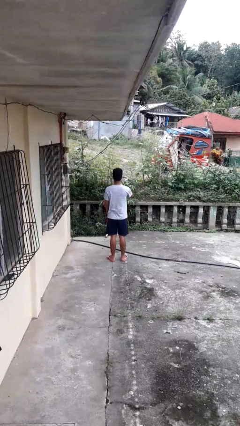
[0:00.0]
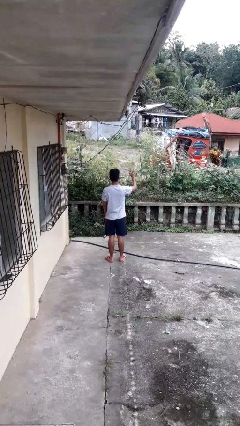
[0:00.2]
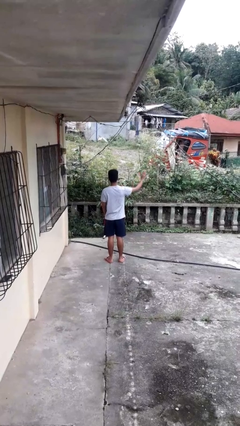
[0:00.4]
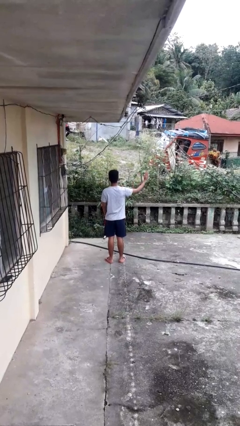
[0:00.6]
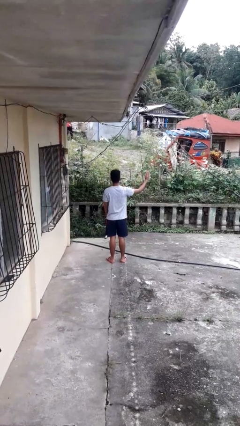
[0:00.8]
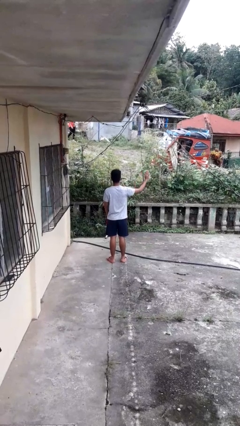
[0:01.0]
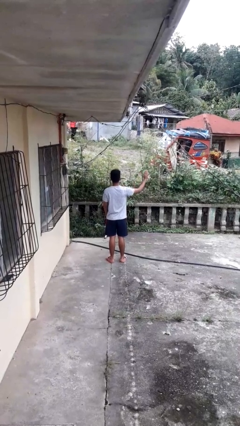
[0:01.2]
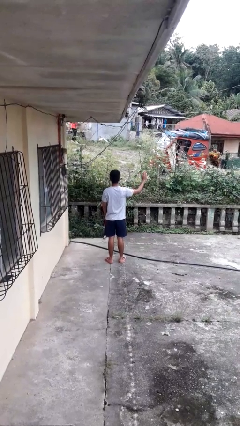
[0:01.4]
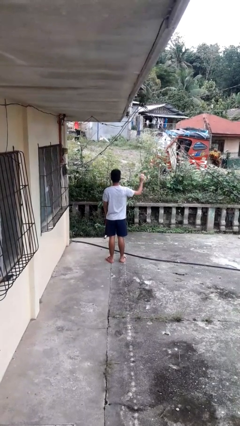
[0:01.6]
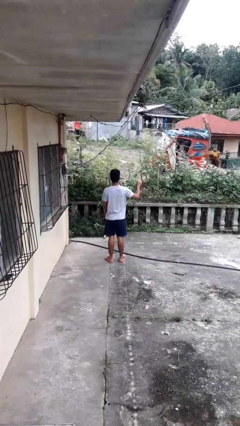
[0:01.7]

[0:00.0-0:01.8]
person gestures swipe right

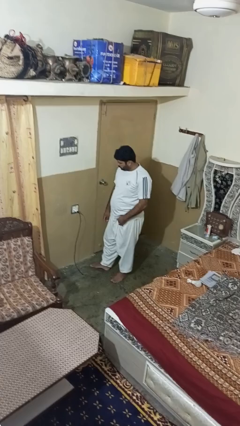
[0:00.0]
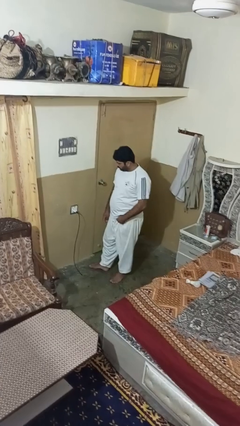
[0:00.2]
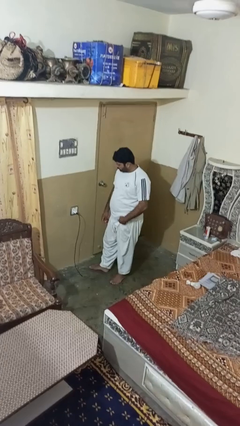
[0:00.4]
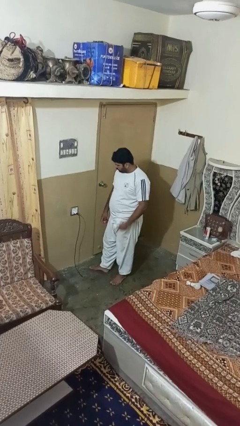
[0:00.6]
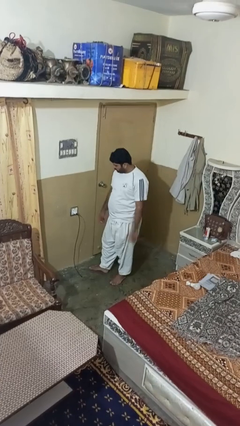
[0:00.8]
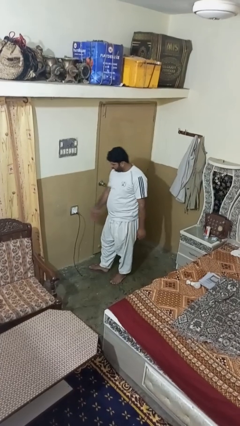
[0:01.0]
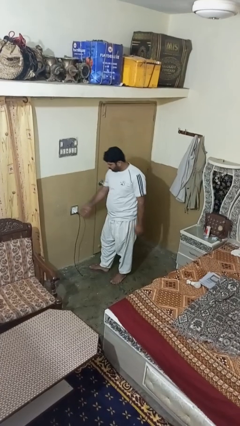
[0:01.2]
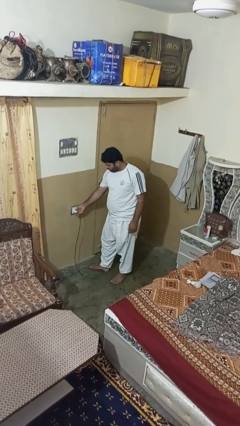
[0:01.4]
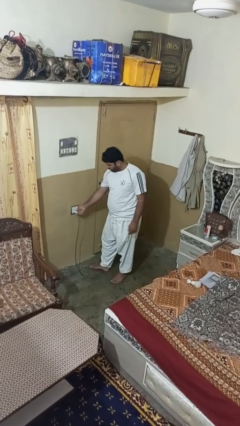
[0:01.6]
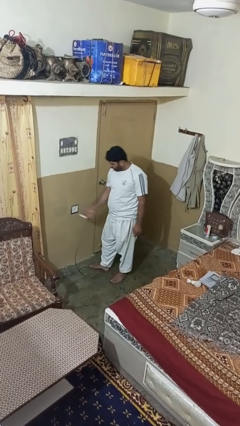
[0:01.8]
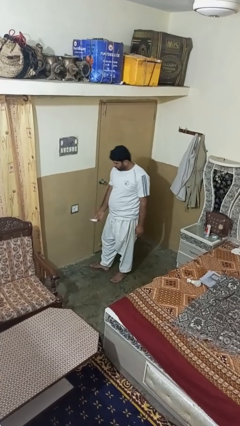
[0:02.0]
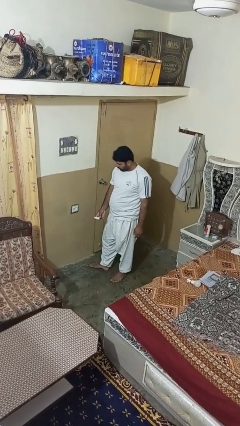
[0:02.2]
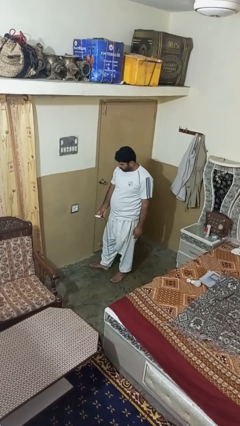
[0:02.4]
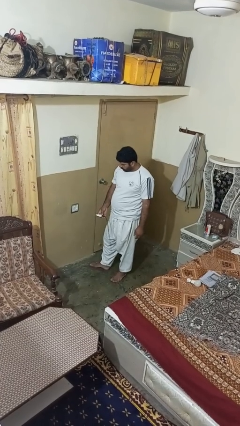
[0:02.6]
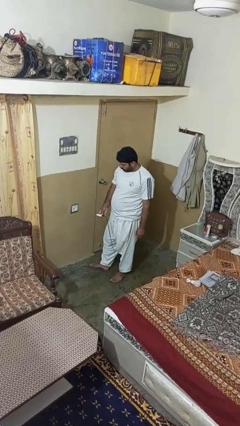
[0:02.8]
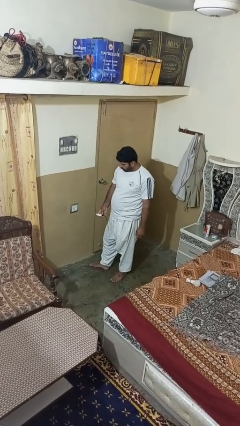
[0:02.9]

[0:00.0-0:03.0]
person unplugs from electrical socket

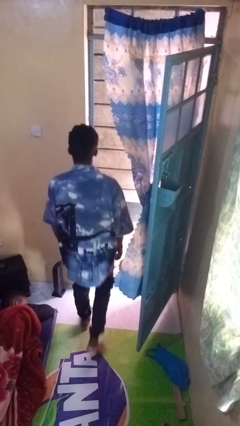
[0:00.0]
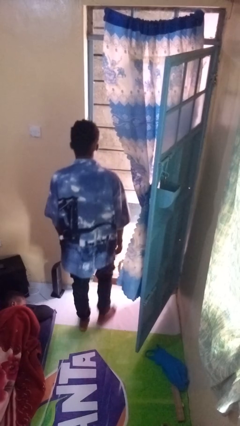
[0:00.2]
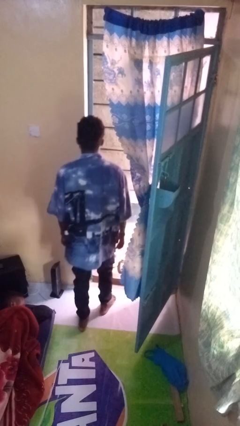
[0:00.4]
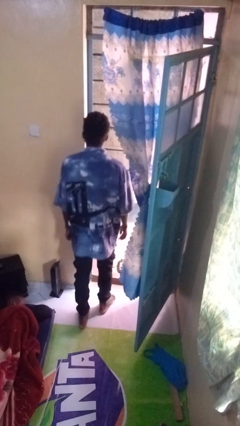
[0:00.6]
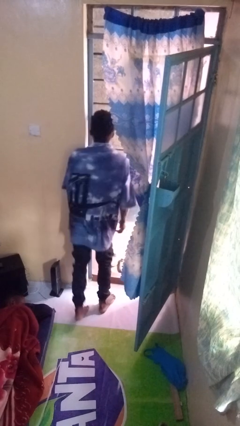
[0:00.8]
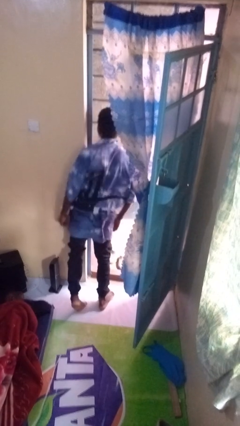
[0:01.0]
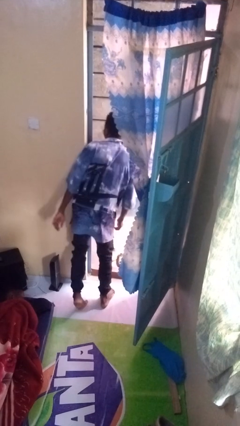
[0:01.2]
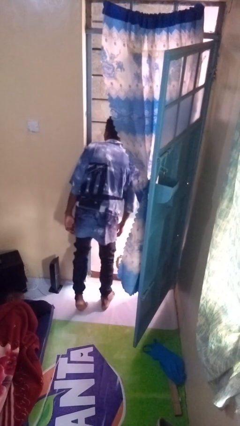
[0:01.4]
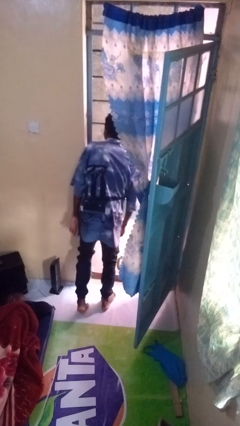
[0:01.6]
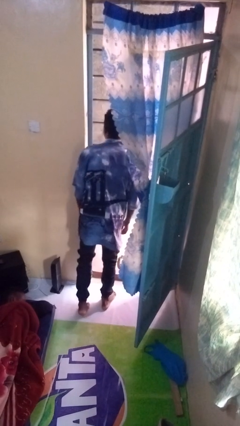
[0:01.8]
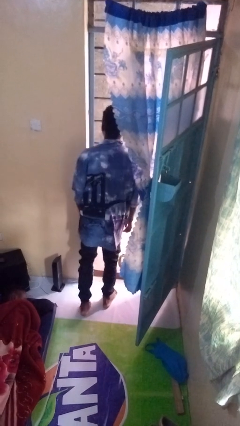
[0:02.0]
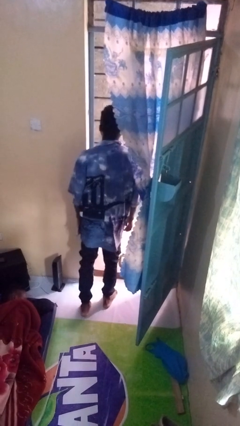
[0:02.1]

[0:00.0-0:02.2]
person bumps into wall

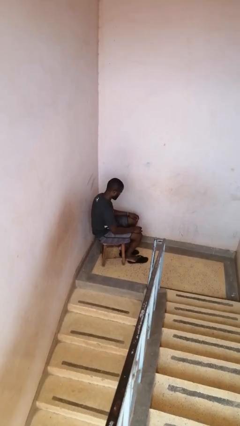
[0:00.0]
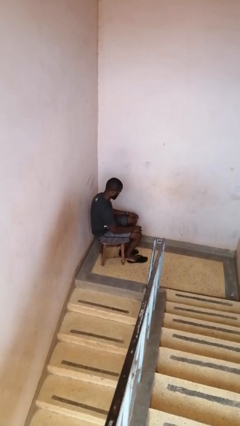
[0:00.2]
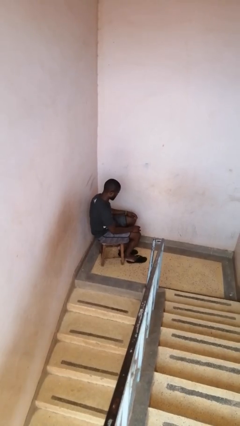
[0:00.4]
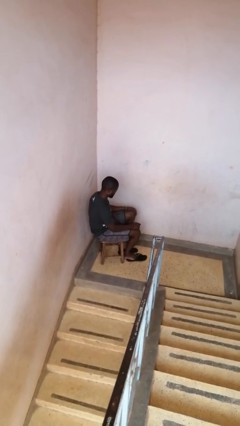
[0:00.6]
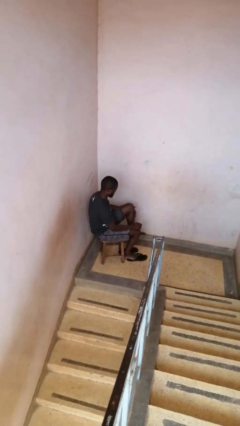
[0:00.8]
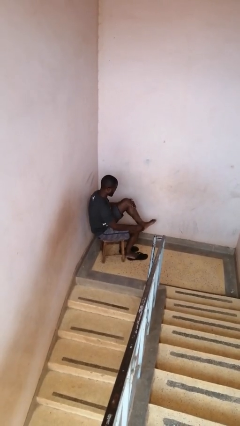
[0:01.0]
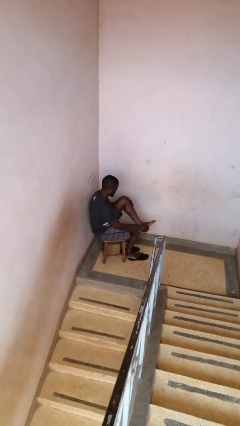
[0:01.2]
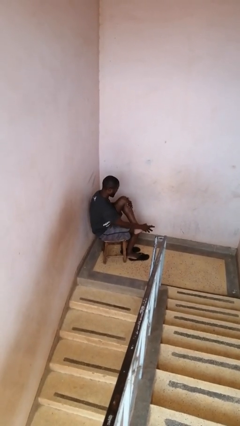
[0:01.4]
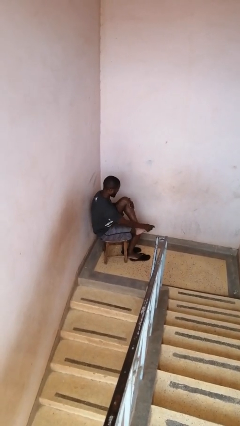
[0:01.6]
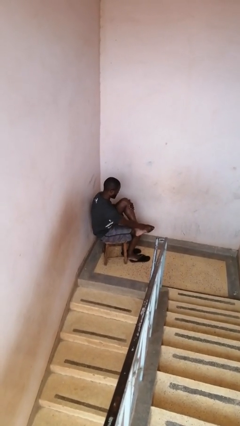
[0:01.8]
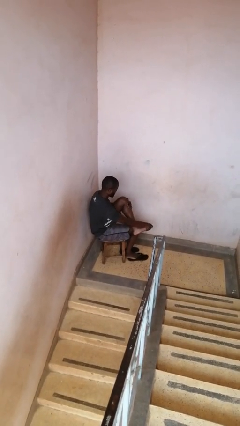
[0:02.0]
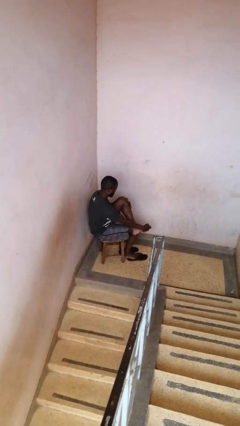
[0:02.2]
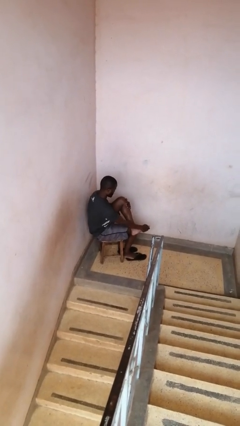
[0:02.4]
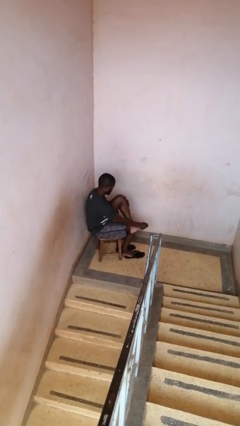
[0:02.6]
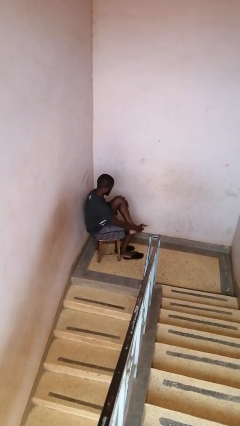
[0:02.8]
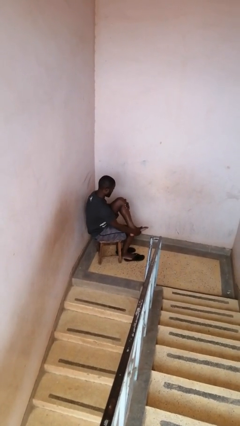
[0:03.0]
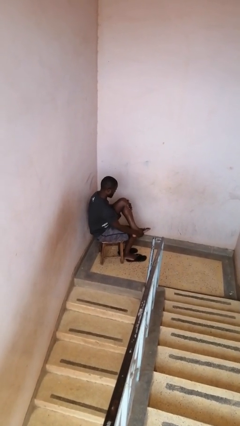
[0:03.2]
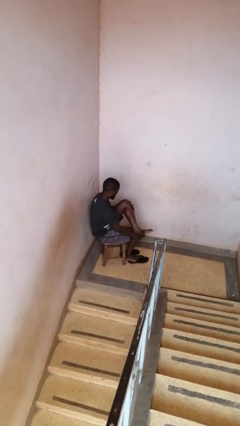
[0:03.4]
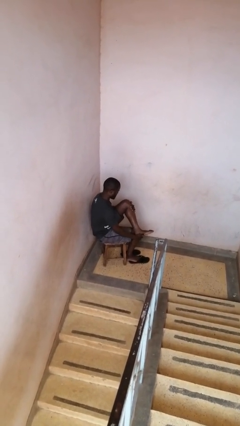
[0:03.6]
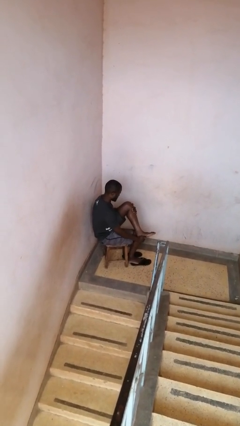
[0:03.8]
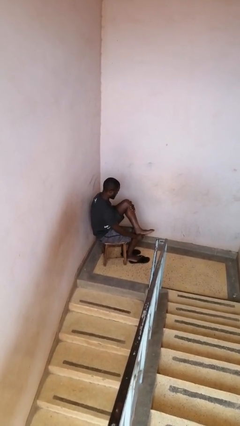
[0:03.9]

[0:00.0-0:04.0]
person rubs foot

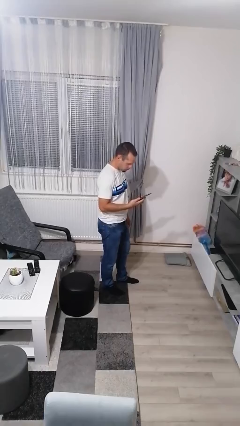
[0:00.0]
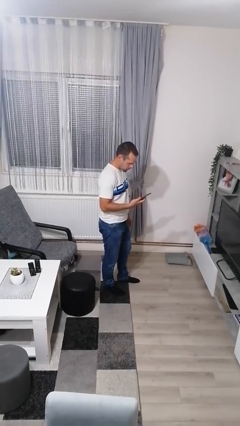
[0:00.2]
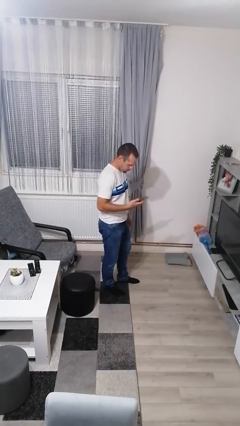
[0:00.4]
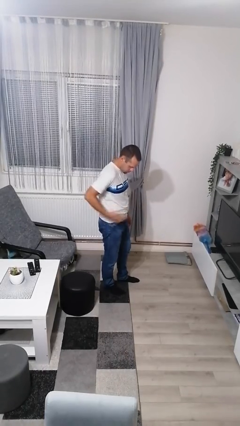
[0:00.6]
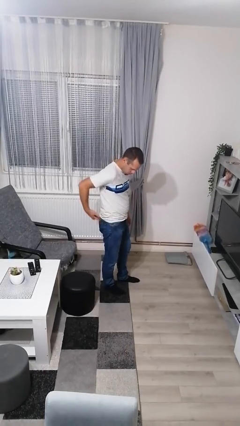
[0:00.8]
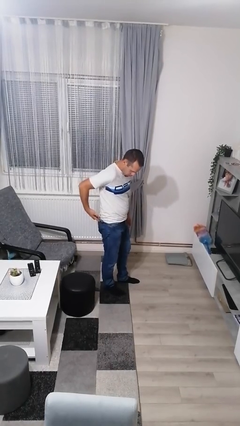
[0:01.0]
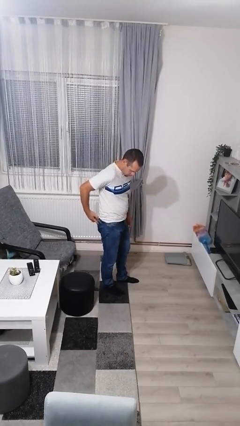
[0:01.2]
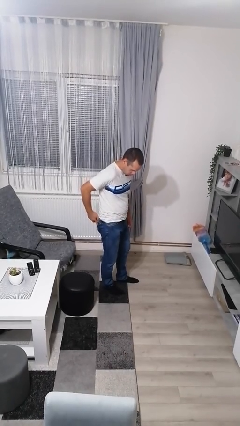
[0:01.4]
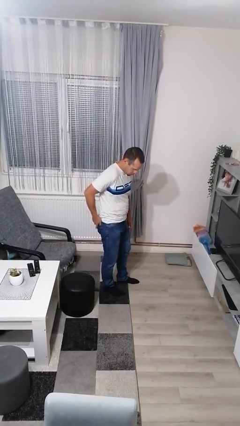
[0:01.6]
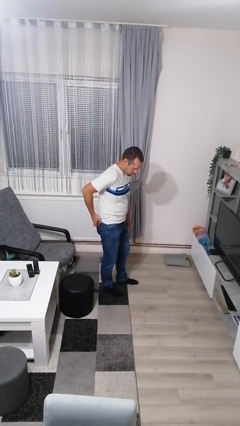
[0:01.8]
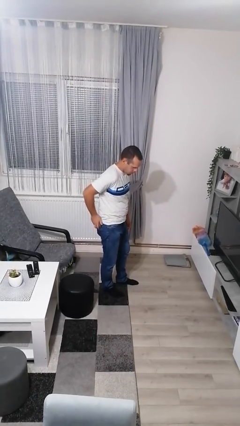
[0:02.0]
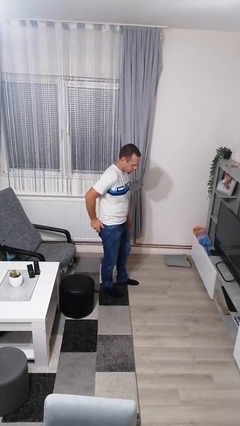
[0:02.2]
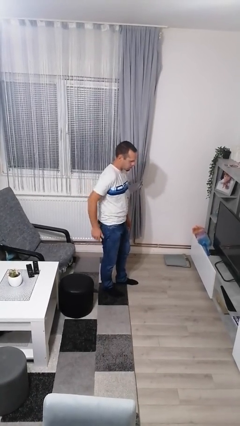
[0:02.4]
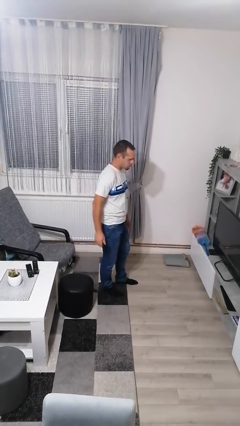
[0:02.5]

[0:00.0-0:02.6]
person puts phone into pocket

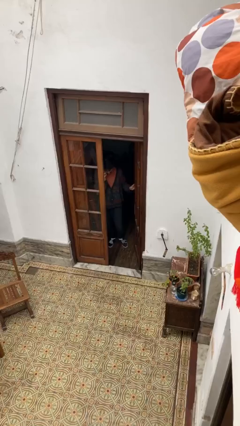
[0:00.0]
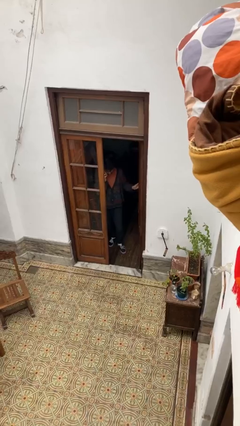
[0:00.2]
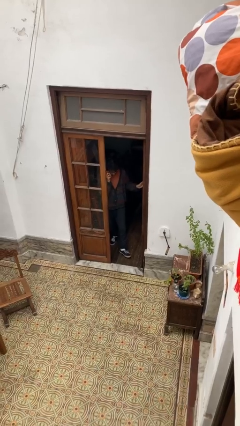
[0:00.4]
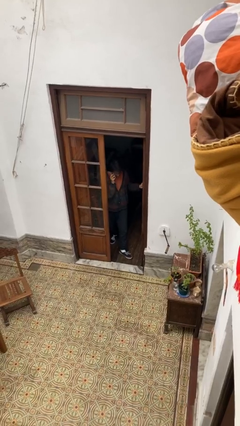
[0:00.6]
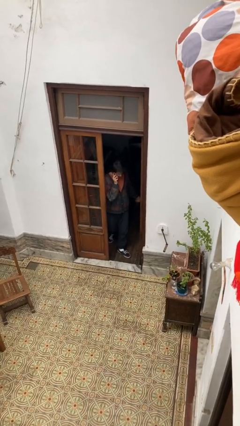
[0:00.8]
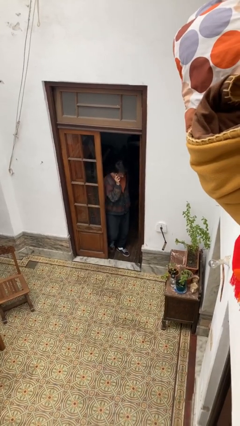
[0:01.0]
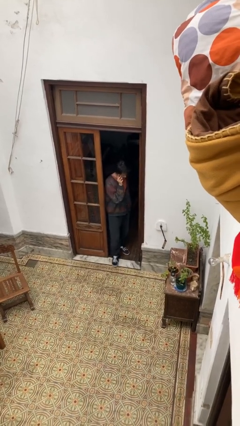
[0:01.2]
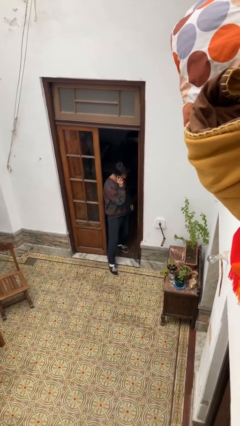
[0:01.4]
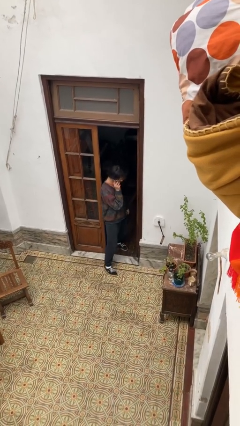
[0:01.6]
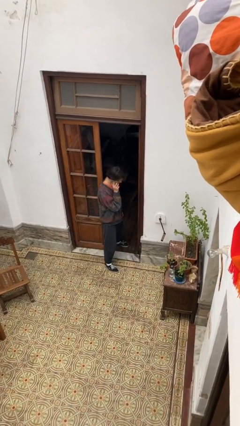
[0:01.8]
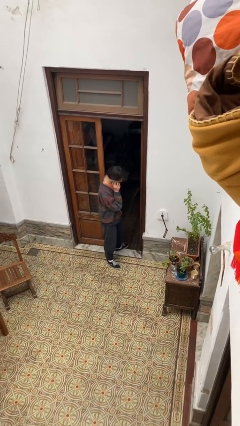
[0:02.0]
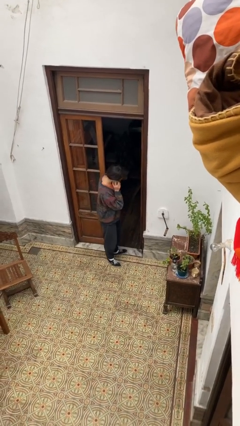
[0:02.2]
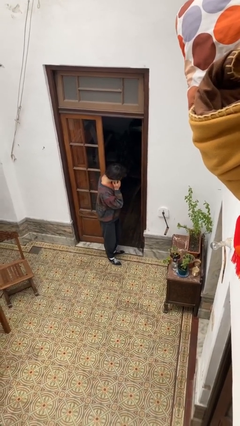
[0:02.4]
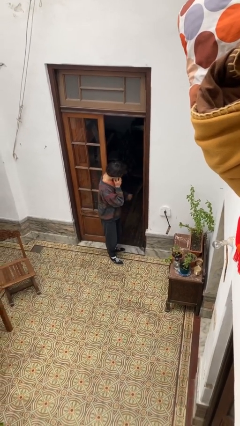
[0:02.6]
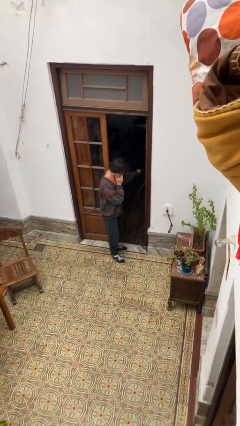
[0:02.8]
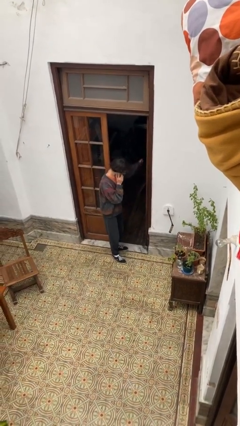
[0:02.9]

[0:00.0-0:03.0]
person enters scene through structure

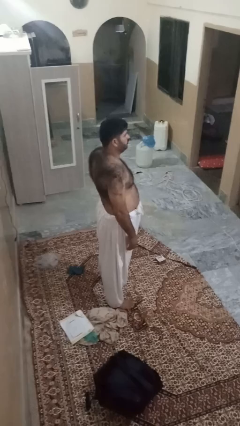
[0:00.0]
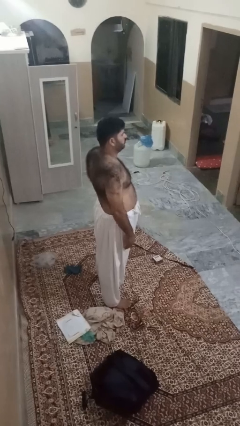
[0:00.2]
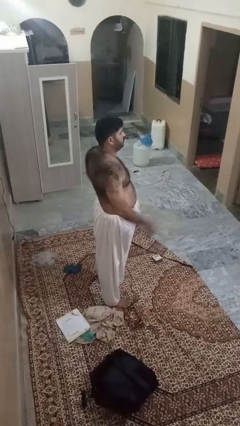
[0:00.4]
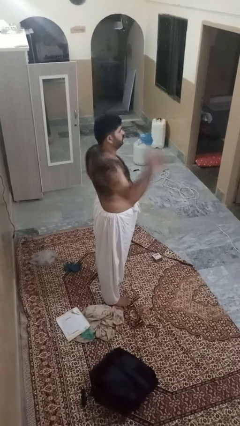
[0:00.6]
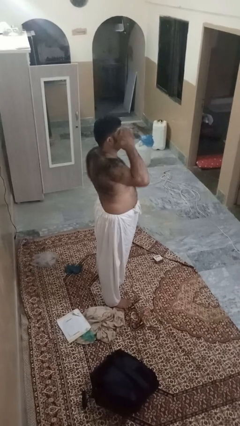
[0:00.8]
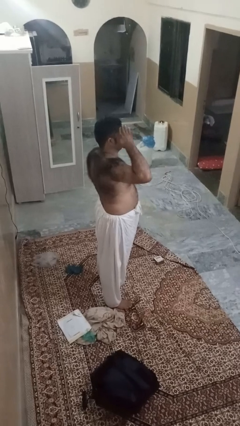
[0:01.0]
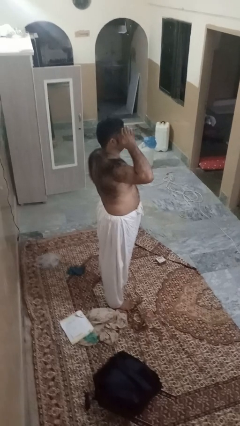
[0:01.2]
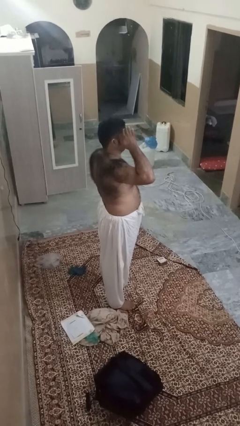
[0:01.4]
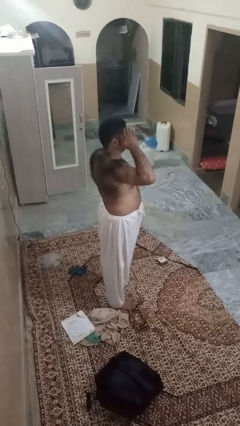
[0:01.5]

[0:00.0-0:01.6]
person salutes
